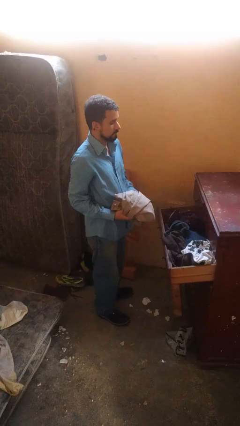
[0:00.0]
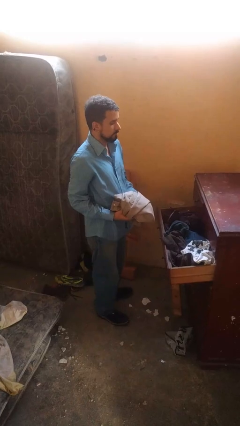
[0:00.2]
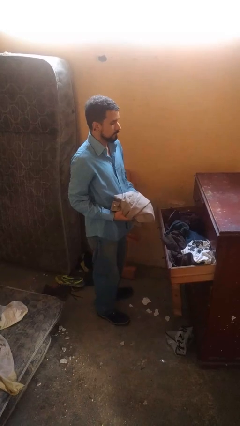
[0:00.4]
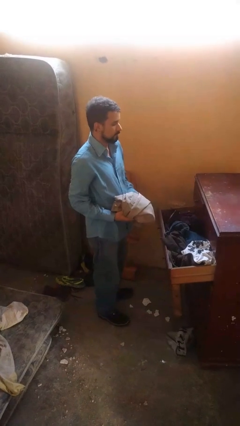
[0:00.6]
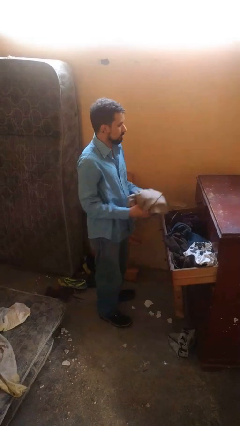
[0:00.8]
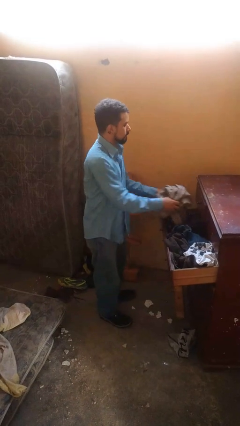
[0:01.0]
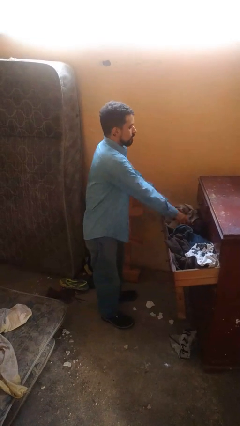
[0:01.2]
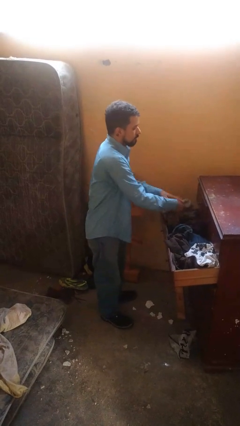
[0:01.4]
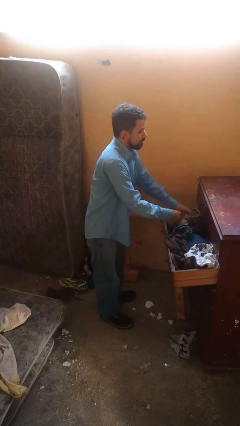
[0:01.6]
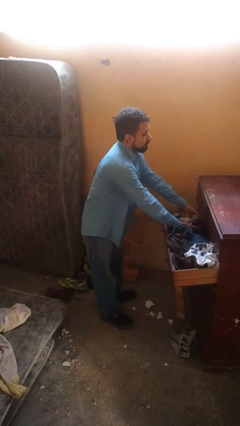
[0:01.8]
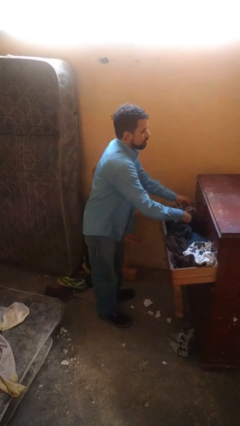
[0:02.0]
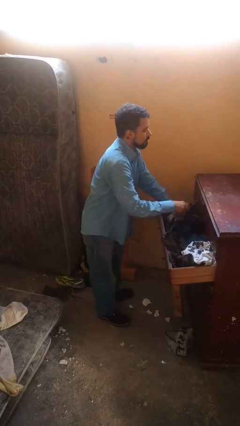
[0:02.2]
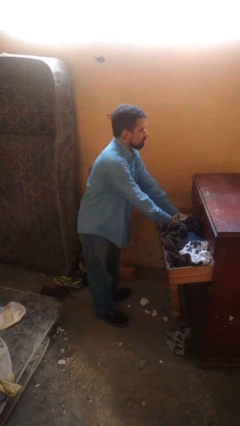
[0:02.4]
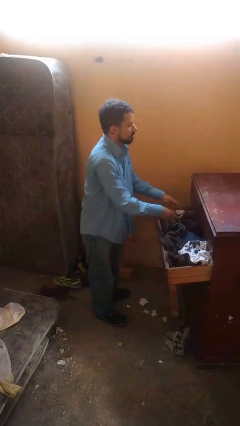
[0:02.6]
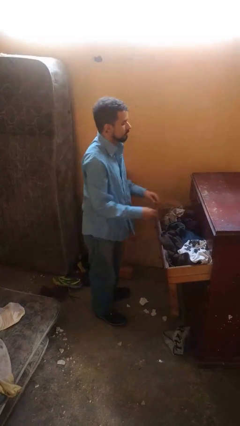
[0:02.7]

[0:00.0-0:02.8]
person puts clothes into dresser

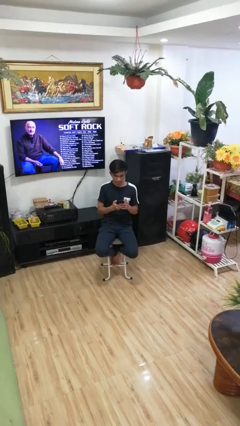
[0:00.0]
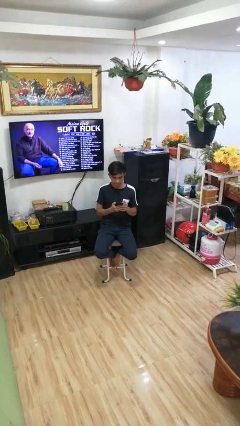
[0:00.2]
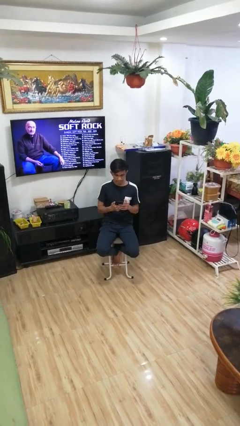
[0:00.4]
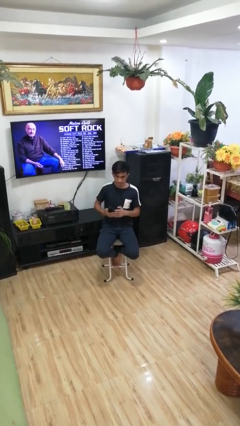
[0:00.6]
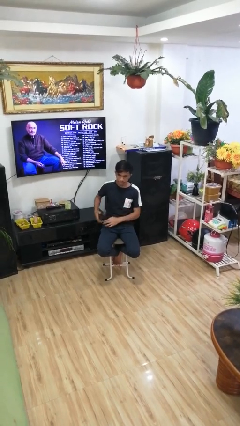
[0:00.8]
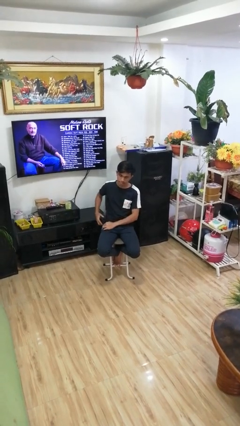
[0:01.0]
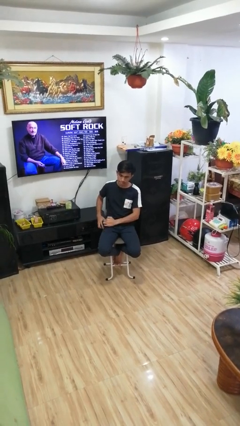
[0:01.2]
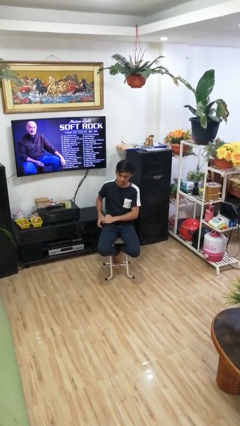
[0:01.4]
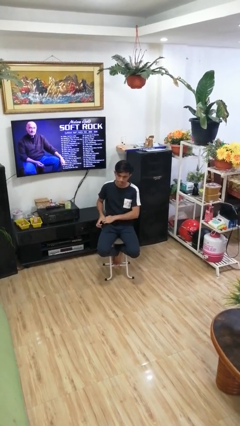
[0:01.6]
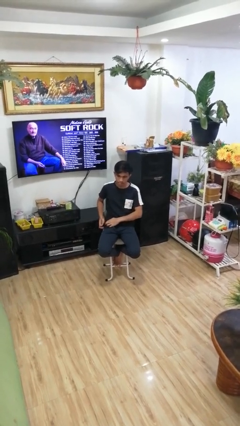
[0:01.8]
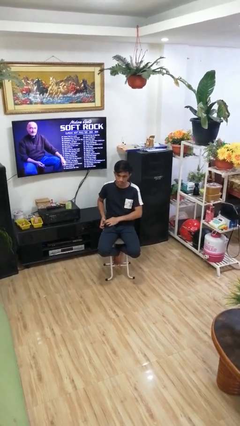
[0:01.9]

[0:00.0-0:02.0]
person puts phone into pocket

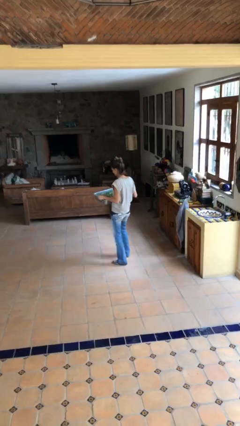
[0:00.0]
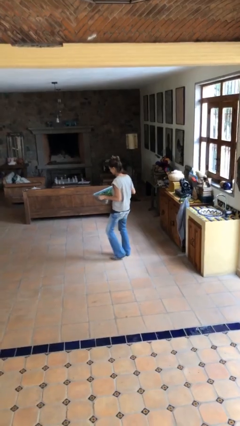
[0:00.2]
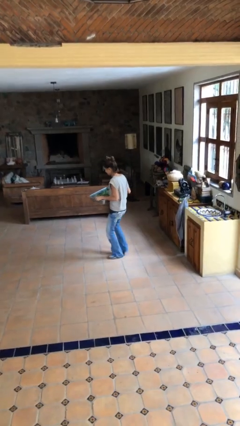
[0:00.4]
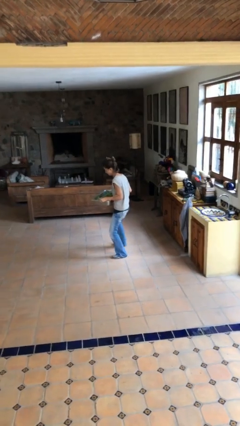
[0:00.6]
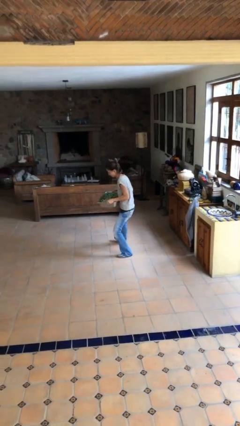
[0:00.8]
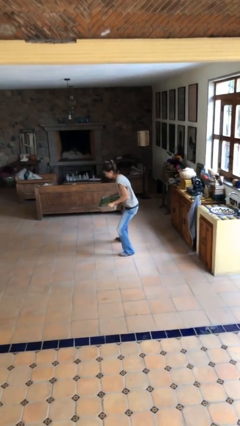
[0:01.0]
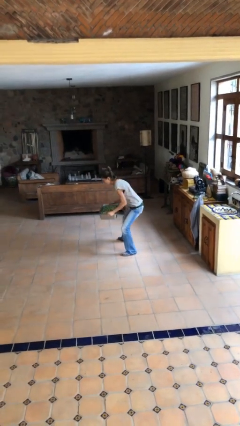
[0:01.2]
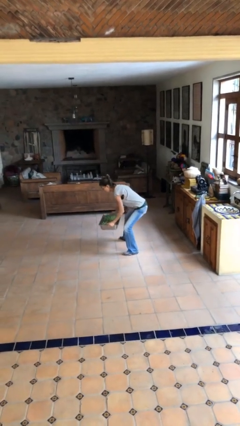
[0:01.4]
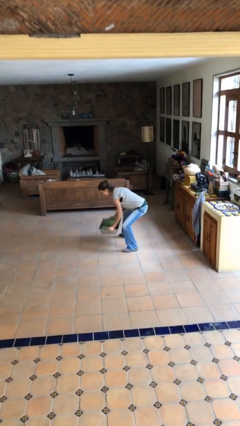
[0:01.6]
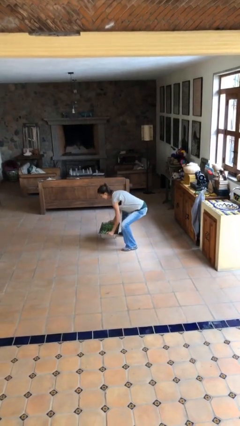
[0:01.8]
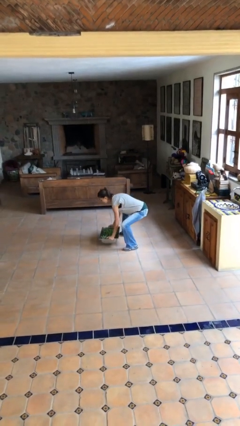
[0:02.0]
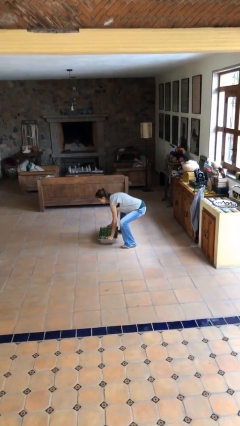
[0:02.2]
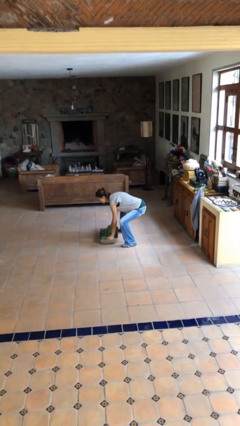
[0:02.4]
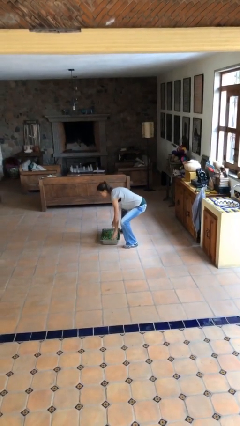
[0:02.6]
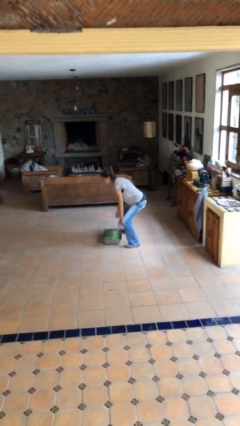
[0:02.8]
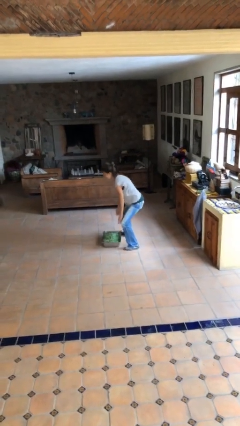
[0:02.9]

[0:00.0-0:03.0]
person puts down object on floor

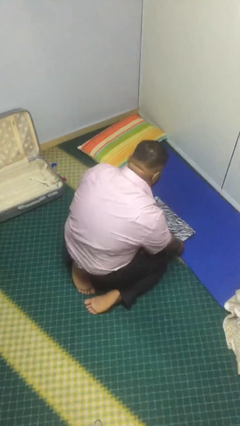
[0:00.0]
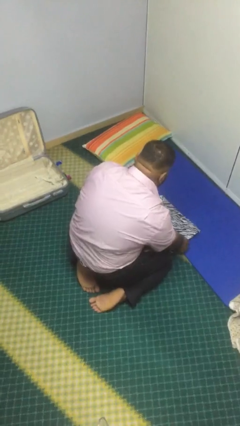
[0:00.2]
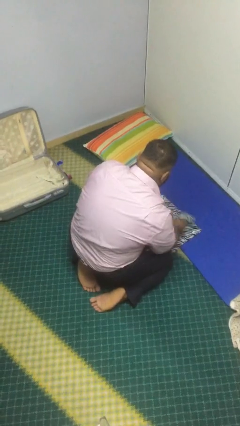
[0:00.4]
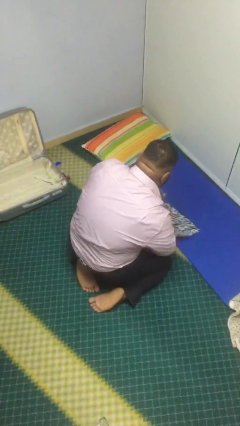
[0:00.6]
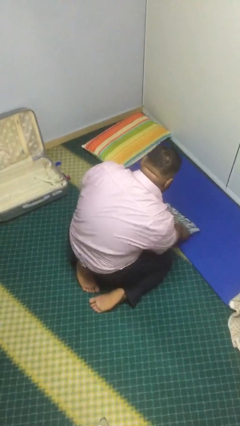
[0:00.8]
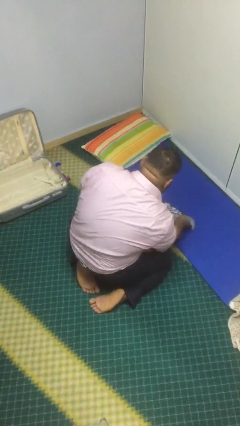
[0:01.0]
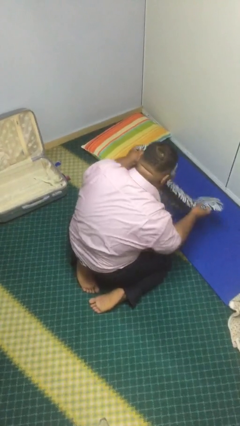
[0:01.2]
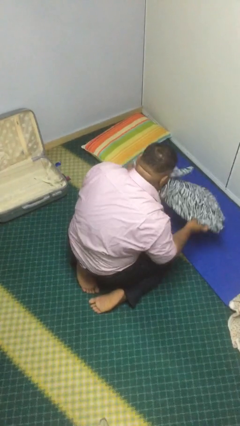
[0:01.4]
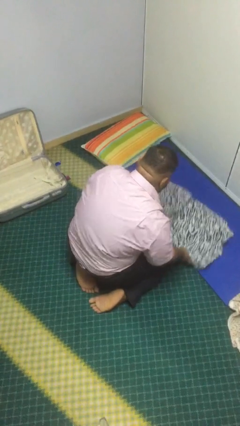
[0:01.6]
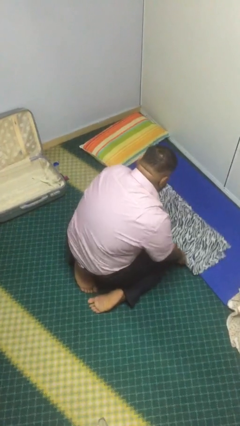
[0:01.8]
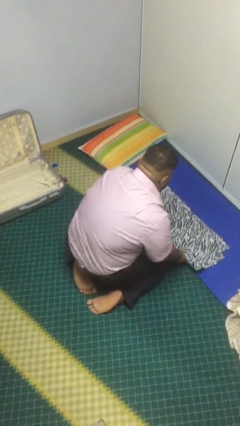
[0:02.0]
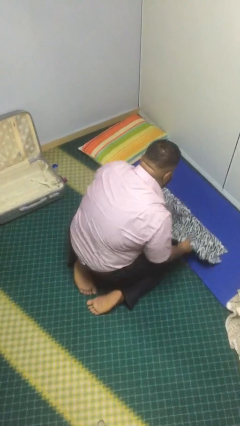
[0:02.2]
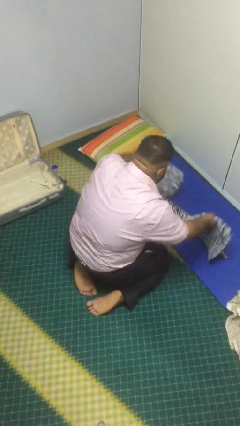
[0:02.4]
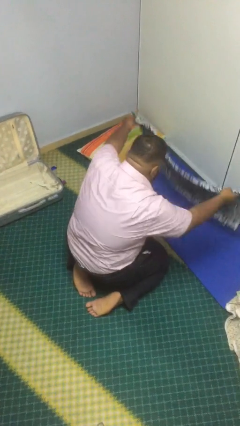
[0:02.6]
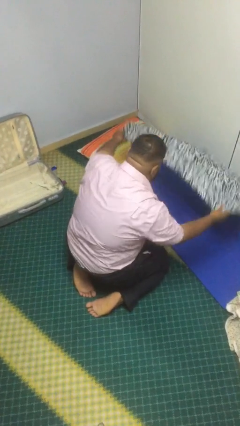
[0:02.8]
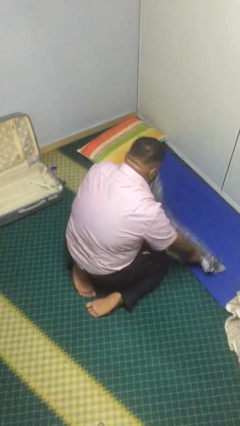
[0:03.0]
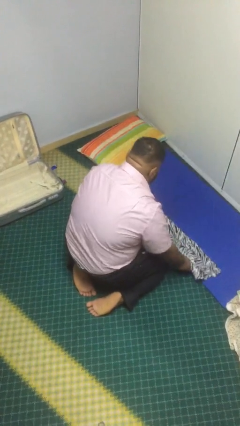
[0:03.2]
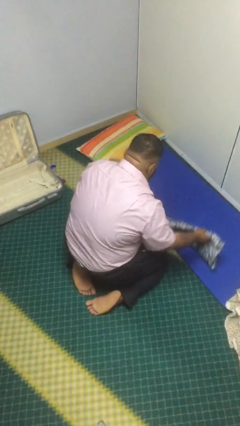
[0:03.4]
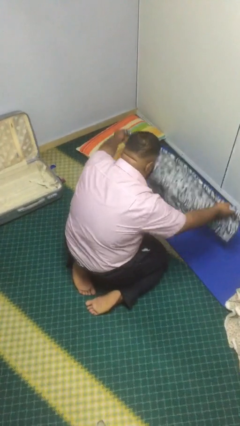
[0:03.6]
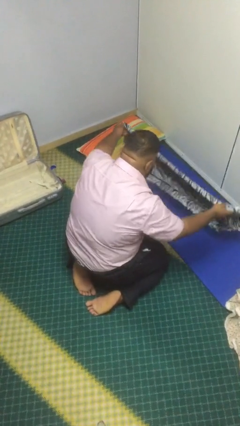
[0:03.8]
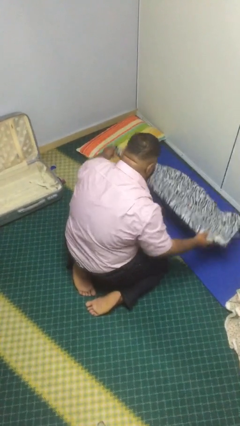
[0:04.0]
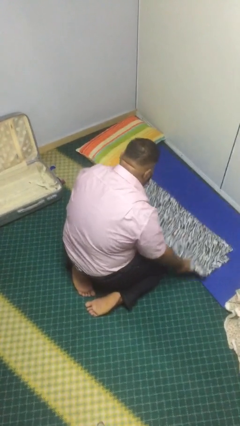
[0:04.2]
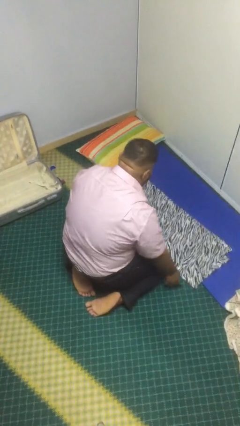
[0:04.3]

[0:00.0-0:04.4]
person unfolds blanket

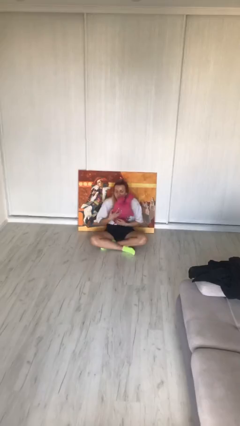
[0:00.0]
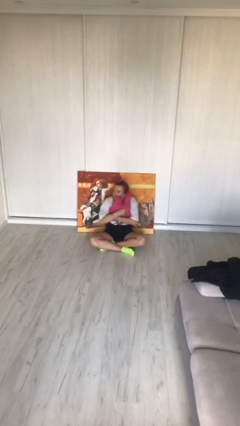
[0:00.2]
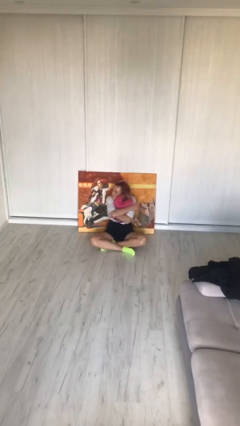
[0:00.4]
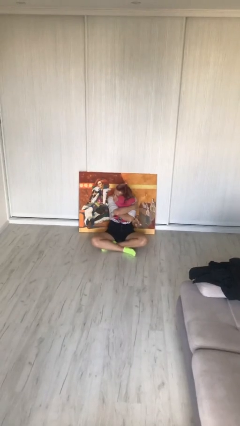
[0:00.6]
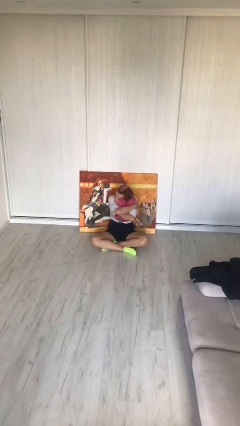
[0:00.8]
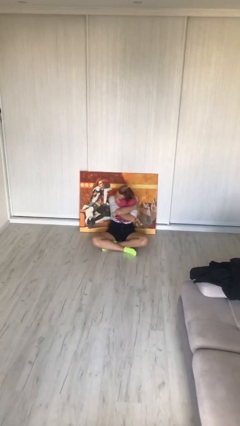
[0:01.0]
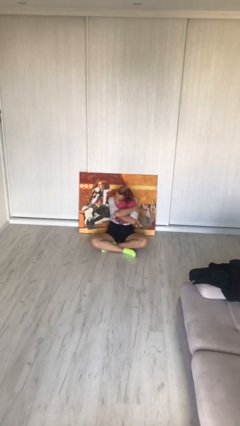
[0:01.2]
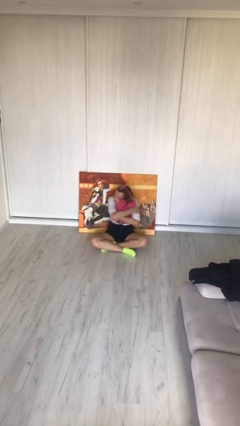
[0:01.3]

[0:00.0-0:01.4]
person hugs stuffed animal

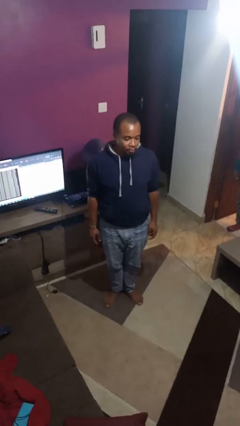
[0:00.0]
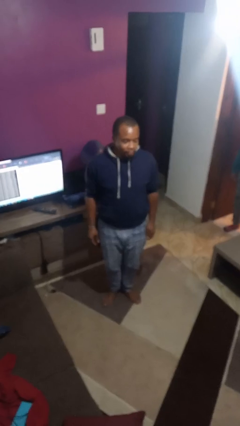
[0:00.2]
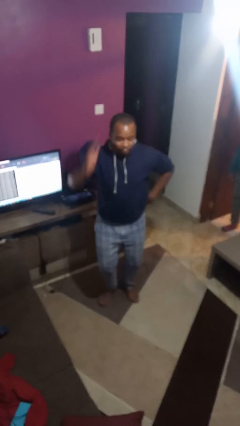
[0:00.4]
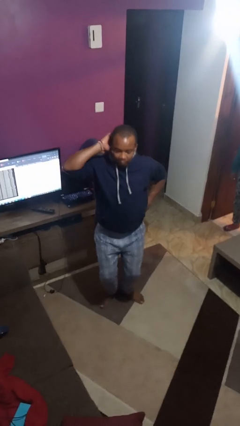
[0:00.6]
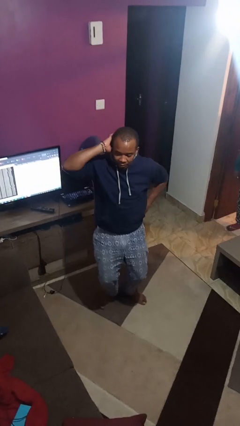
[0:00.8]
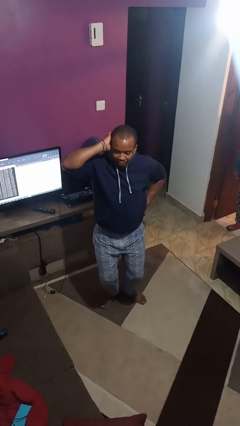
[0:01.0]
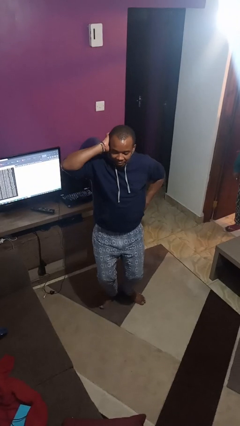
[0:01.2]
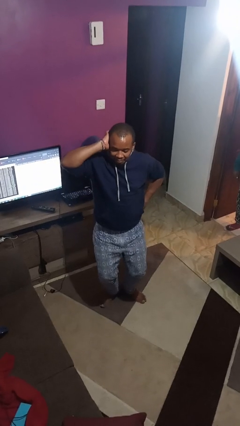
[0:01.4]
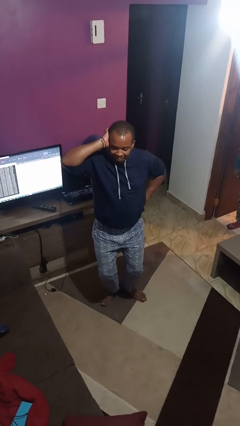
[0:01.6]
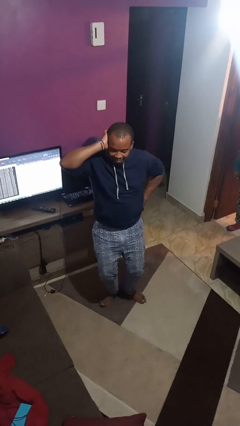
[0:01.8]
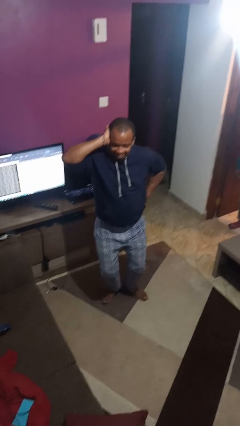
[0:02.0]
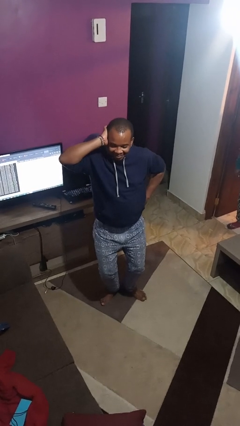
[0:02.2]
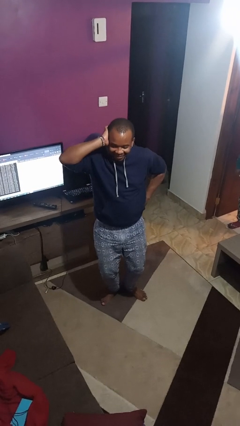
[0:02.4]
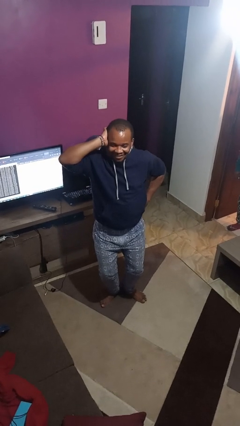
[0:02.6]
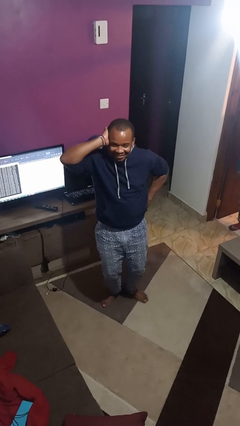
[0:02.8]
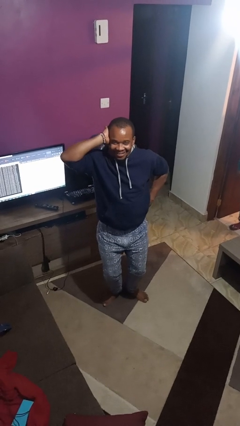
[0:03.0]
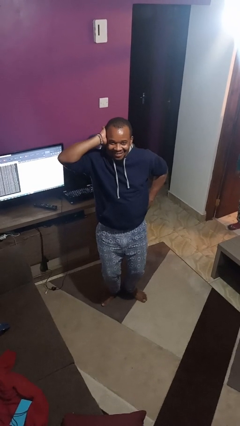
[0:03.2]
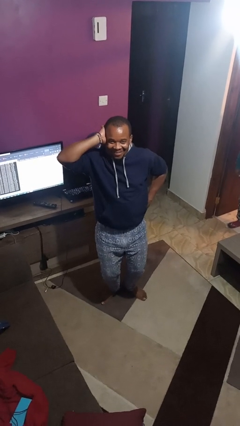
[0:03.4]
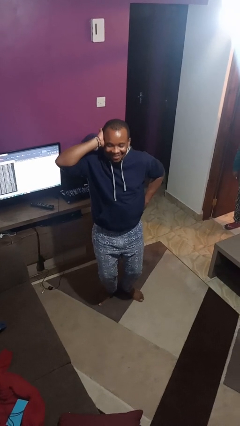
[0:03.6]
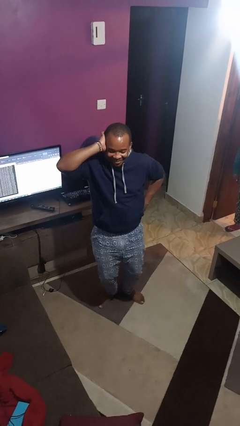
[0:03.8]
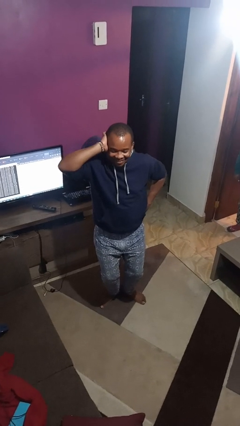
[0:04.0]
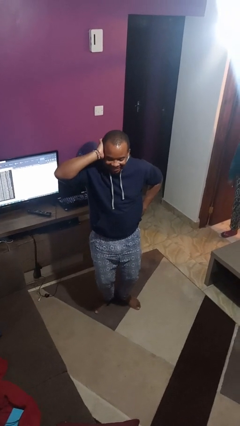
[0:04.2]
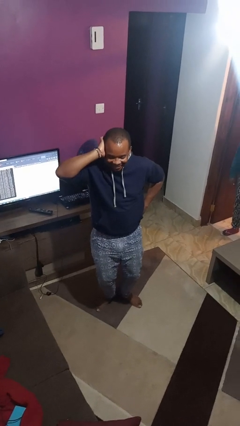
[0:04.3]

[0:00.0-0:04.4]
person wiggles hips
